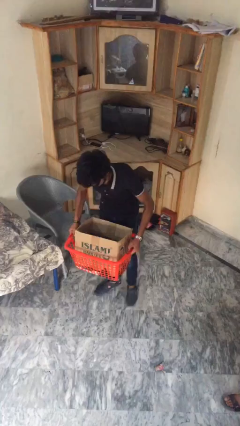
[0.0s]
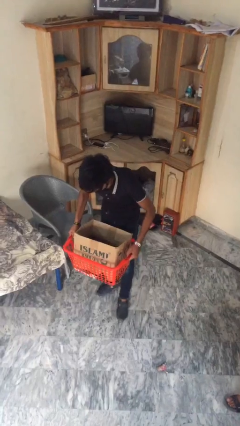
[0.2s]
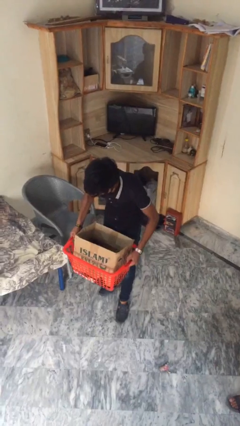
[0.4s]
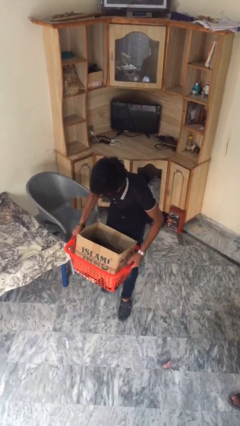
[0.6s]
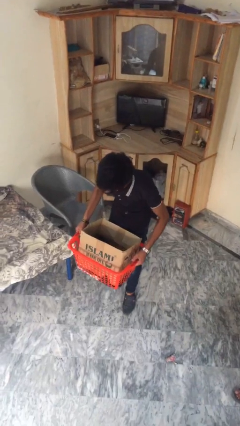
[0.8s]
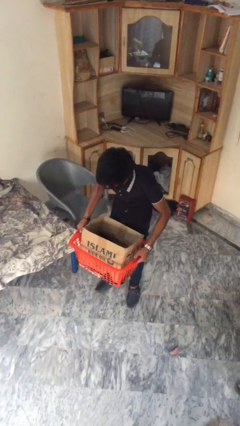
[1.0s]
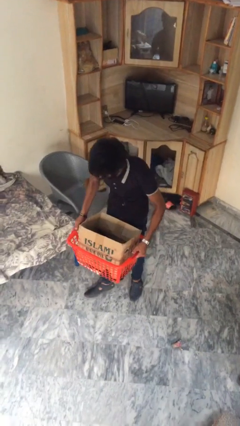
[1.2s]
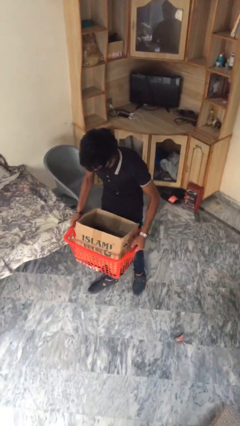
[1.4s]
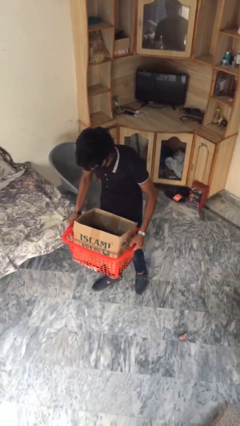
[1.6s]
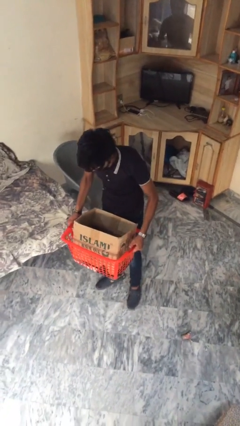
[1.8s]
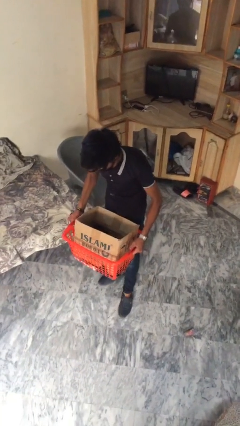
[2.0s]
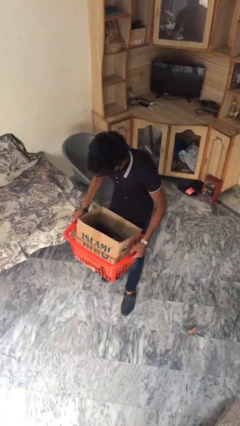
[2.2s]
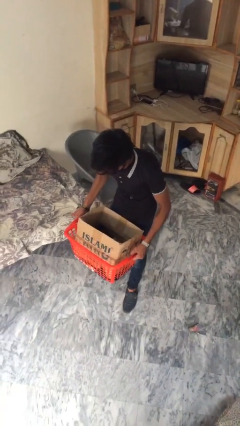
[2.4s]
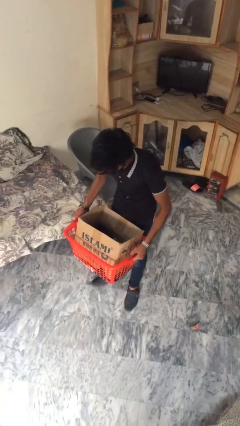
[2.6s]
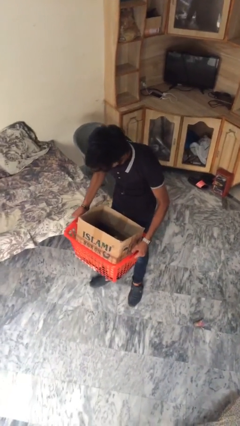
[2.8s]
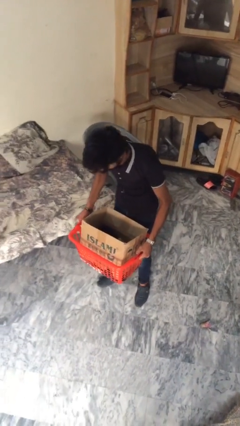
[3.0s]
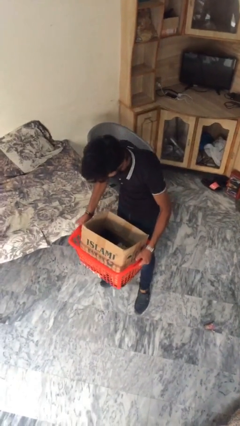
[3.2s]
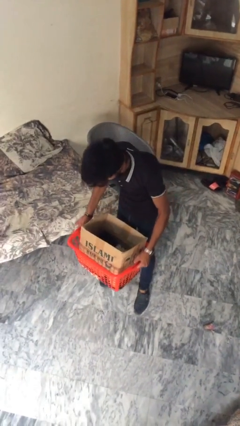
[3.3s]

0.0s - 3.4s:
person carries heavy object

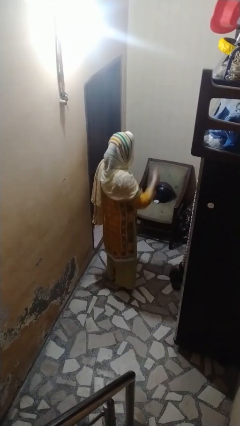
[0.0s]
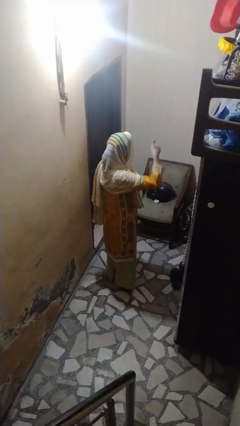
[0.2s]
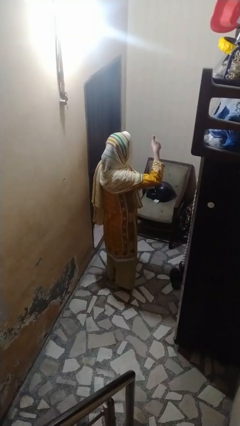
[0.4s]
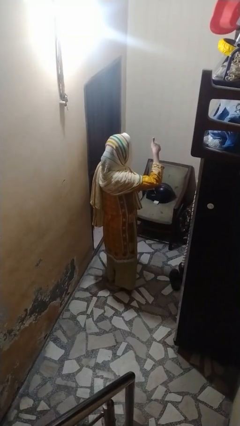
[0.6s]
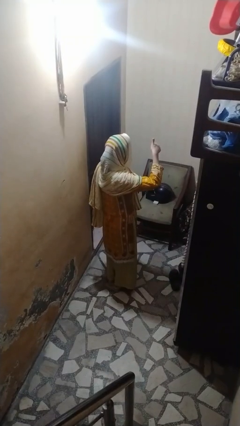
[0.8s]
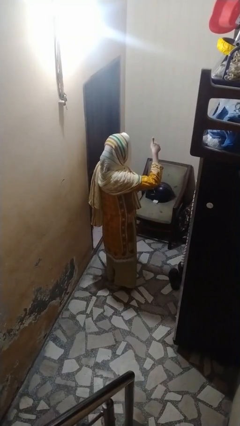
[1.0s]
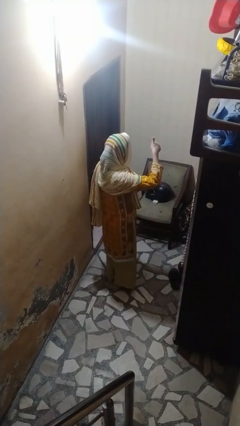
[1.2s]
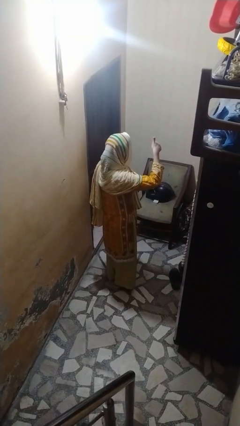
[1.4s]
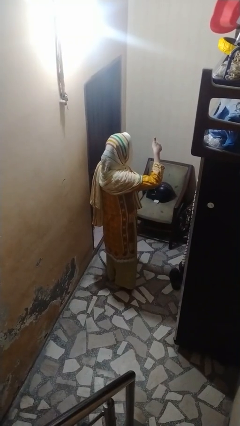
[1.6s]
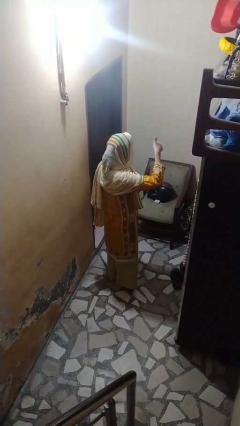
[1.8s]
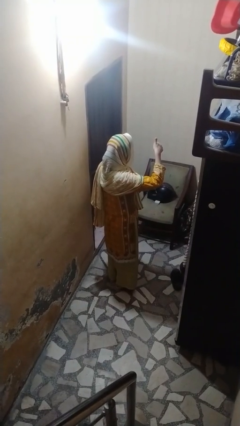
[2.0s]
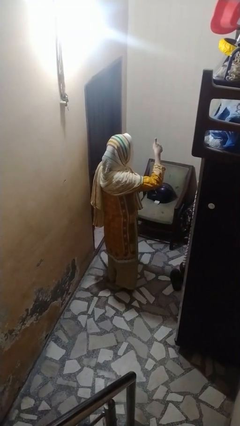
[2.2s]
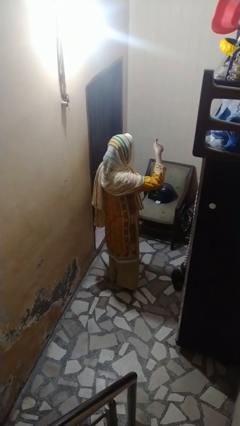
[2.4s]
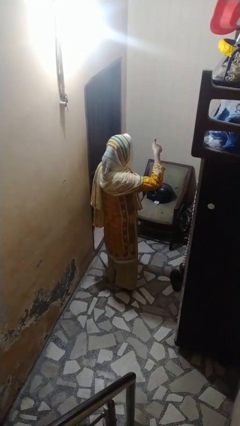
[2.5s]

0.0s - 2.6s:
person gestures thumbs up

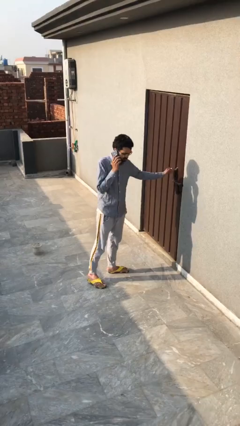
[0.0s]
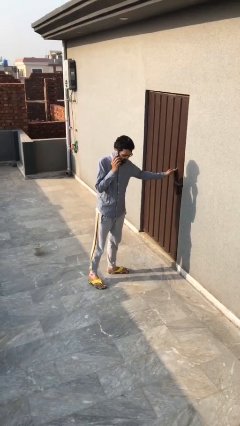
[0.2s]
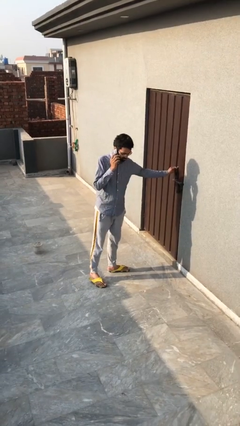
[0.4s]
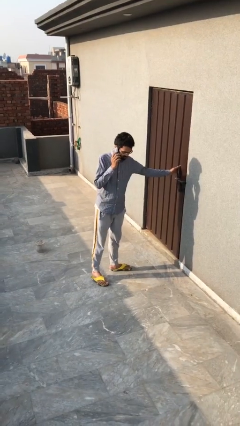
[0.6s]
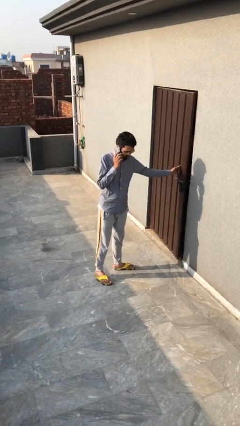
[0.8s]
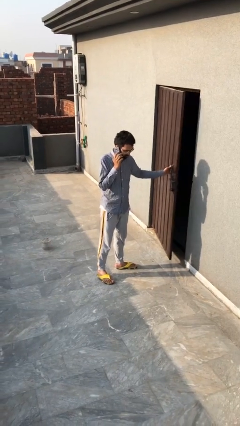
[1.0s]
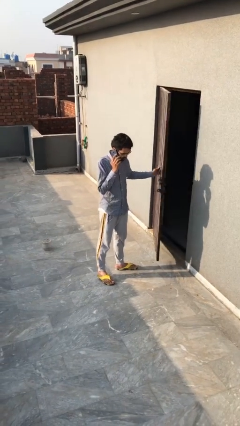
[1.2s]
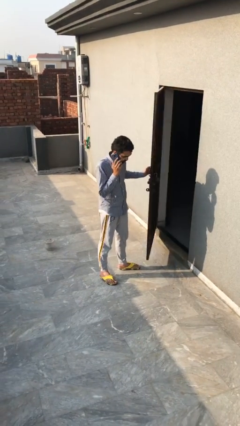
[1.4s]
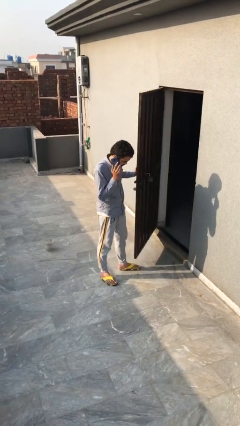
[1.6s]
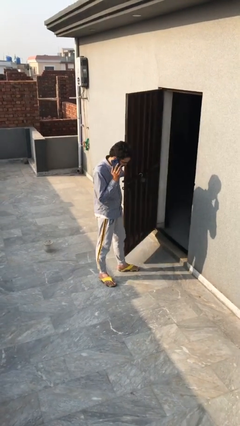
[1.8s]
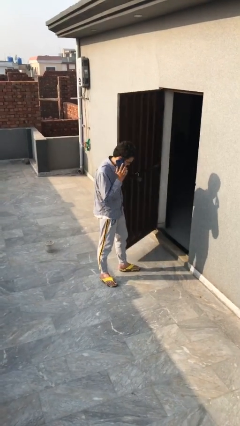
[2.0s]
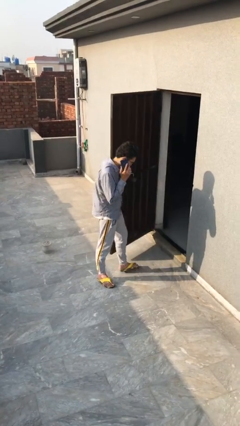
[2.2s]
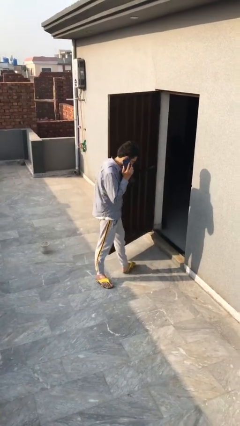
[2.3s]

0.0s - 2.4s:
person opens facility door

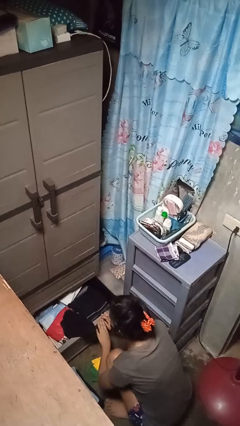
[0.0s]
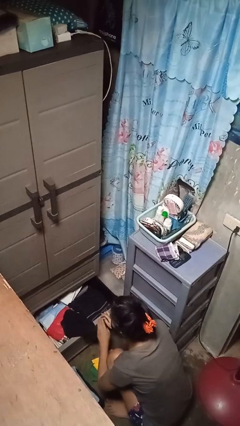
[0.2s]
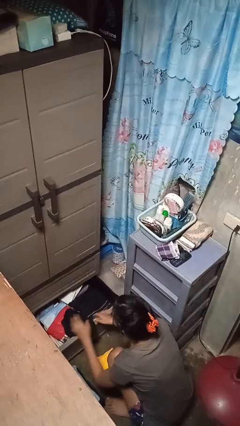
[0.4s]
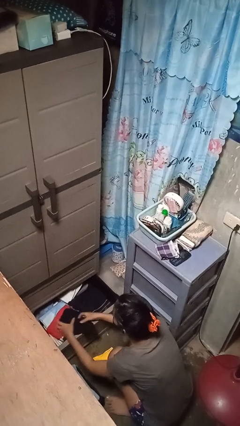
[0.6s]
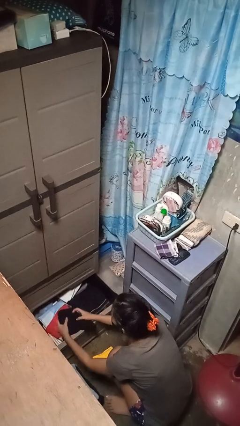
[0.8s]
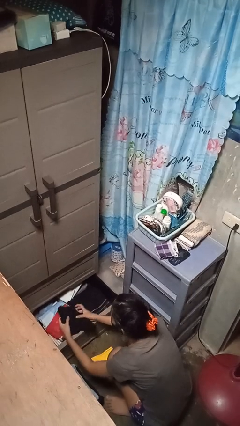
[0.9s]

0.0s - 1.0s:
person takes clothes from dresser

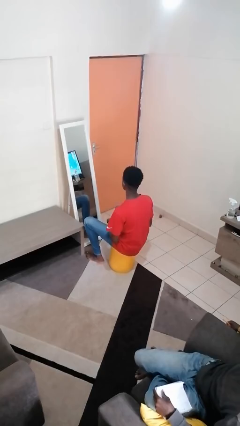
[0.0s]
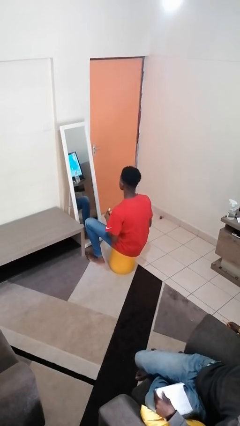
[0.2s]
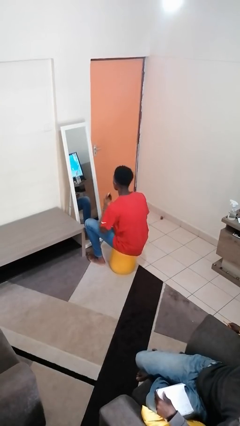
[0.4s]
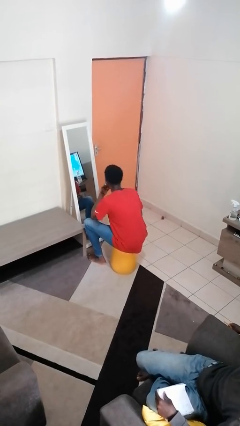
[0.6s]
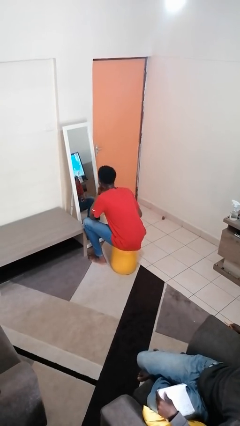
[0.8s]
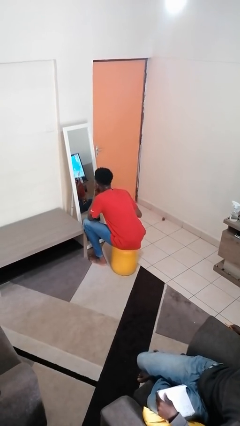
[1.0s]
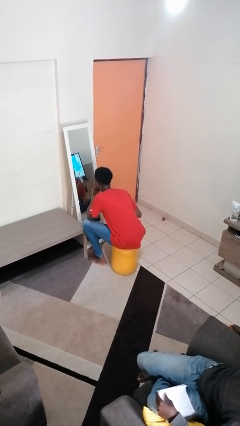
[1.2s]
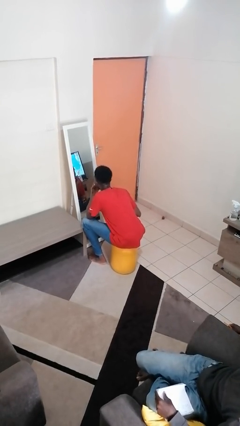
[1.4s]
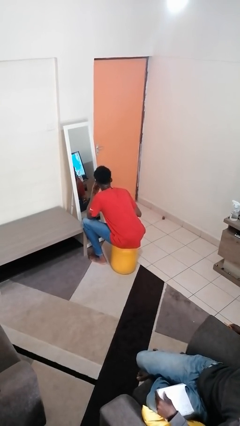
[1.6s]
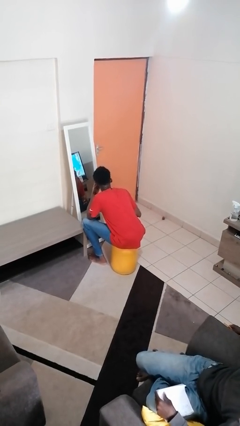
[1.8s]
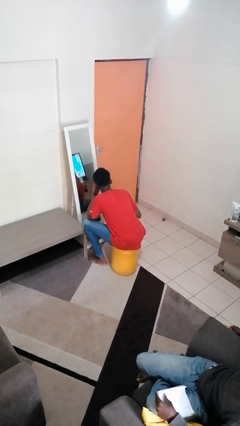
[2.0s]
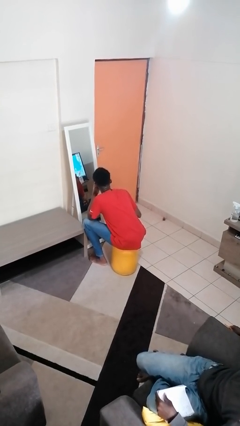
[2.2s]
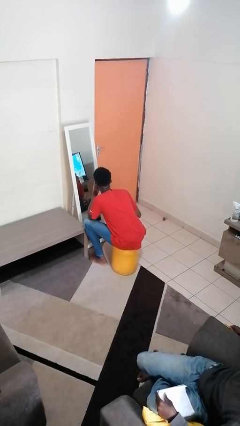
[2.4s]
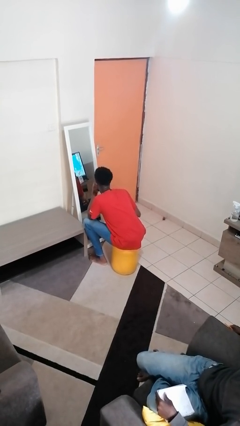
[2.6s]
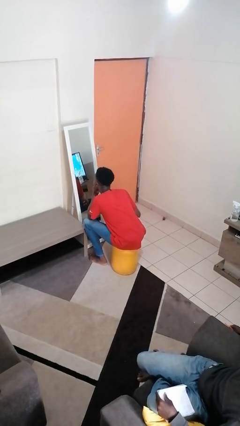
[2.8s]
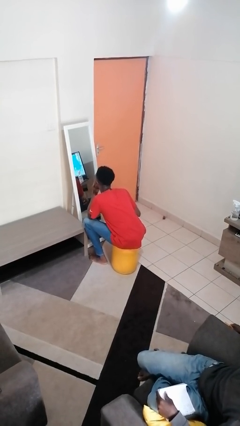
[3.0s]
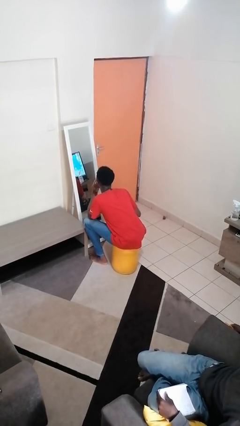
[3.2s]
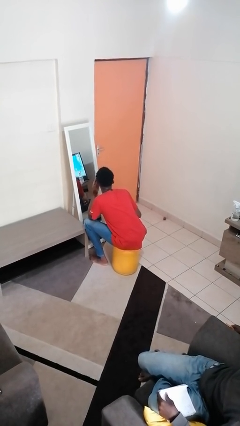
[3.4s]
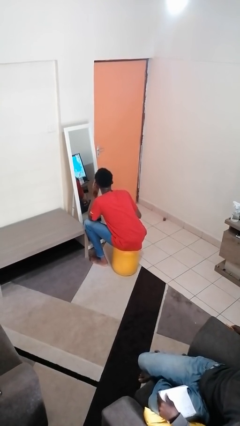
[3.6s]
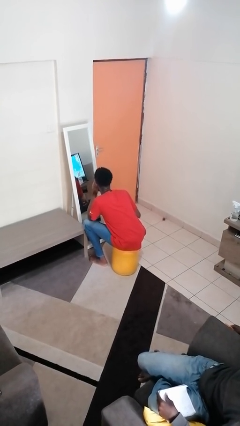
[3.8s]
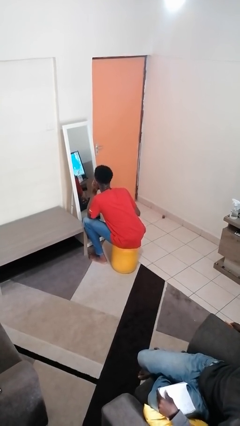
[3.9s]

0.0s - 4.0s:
person applies lip makeup

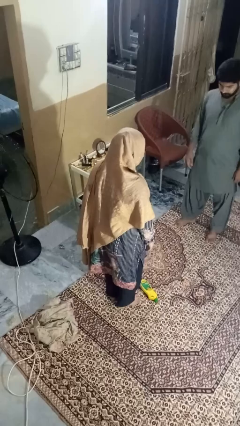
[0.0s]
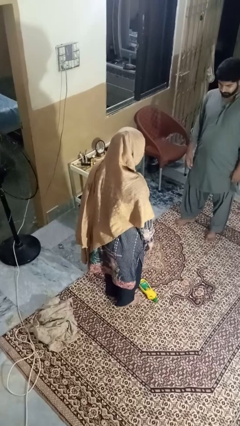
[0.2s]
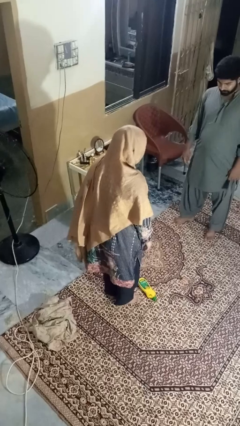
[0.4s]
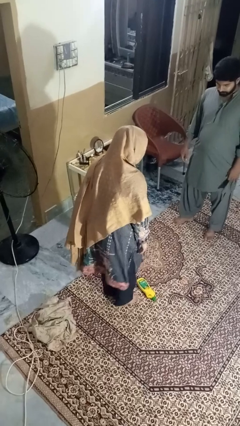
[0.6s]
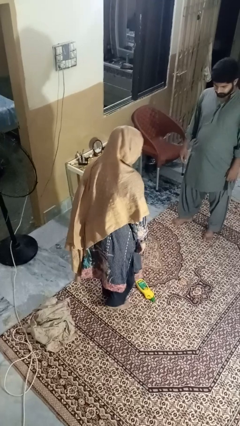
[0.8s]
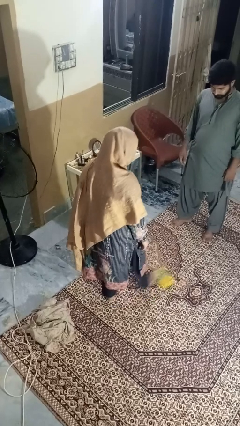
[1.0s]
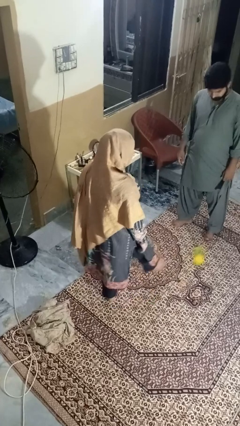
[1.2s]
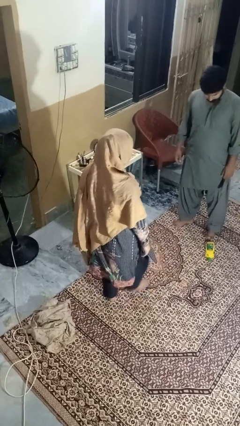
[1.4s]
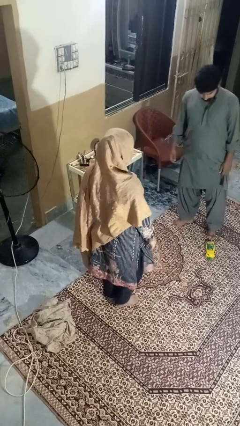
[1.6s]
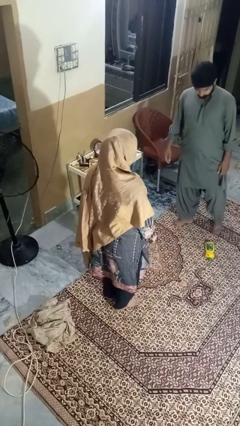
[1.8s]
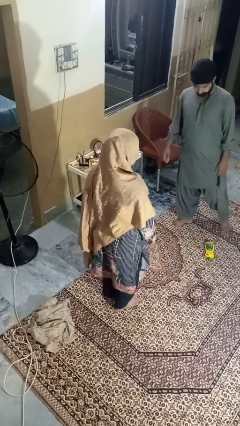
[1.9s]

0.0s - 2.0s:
person kicks object to person

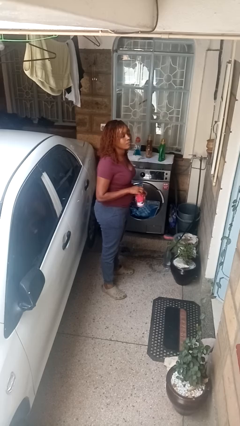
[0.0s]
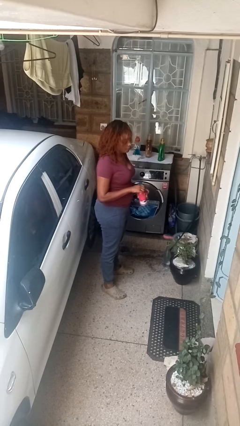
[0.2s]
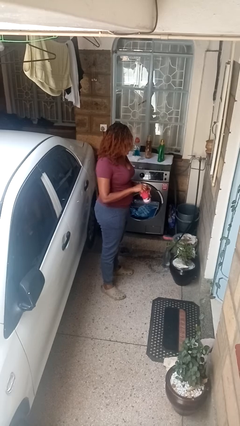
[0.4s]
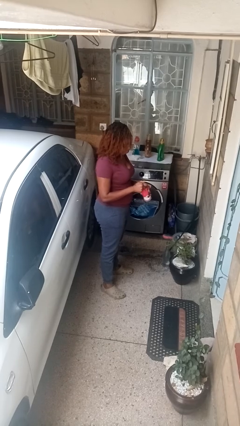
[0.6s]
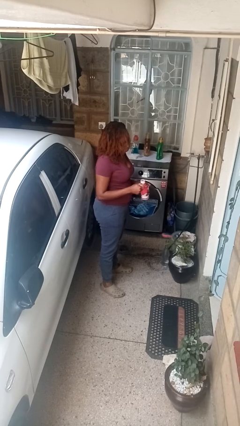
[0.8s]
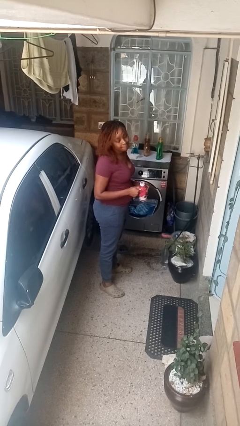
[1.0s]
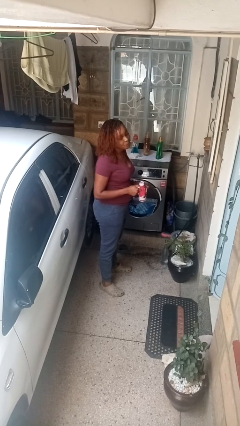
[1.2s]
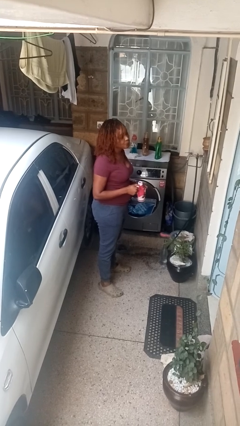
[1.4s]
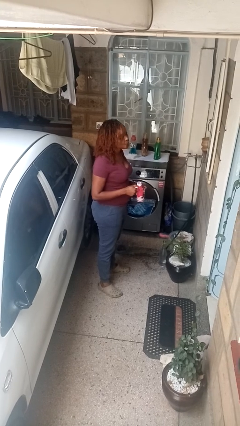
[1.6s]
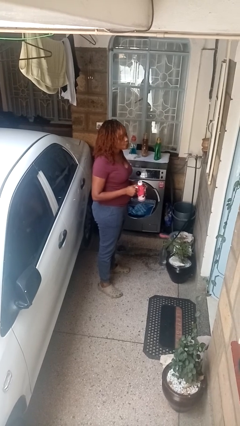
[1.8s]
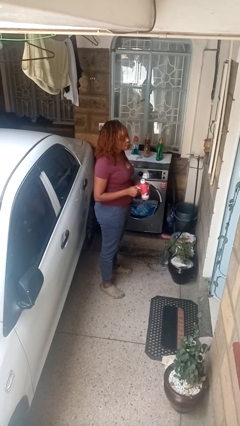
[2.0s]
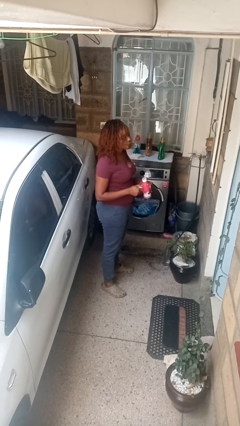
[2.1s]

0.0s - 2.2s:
person opens beverage can
